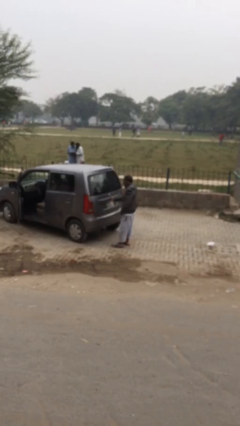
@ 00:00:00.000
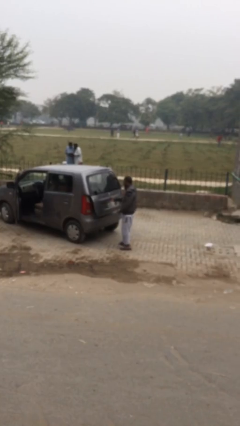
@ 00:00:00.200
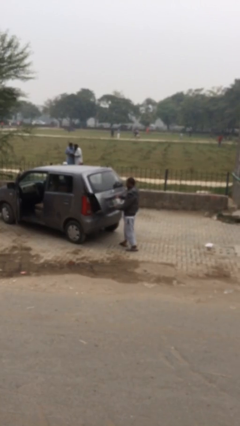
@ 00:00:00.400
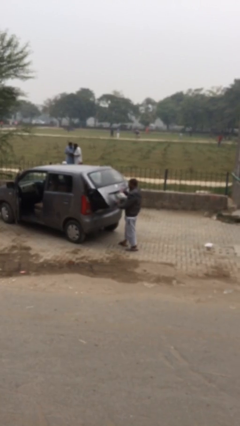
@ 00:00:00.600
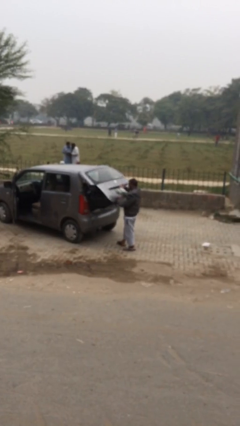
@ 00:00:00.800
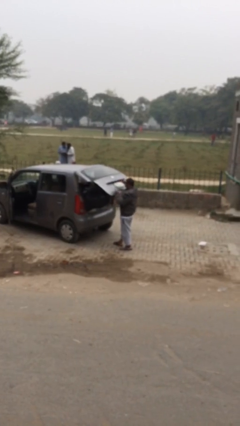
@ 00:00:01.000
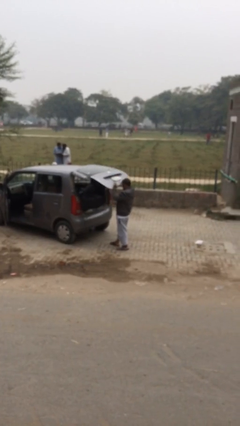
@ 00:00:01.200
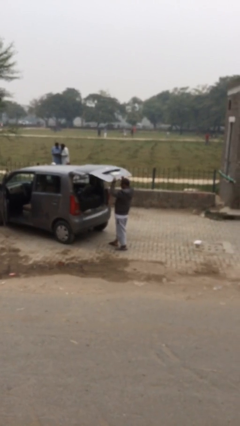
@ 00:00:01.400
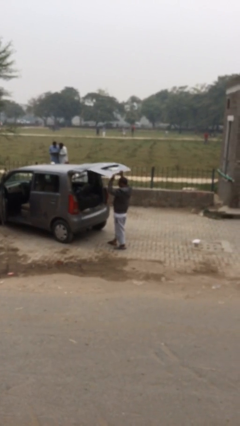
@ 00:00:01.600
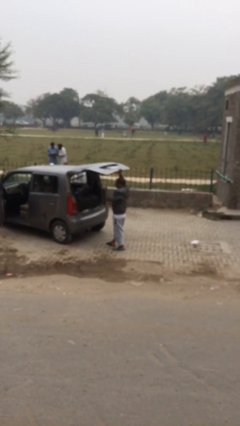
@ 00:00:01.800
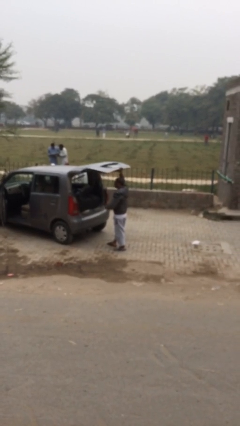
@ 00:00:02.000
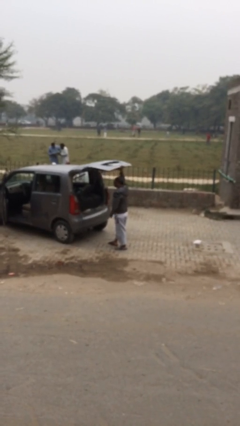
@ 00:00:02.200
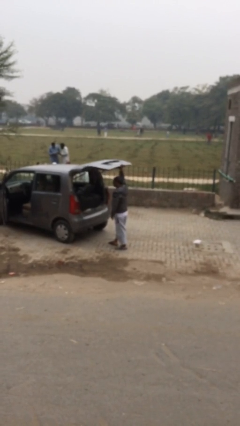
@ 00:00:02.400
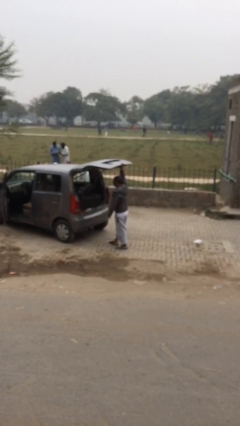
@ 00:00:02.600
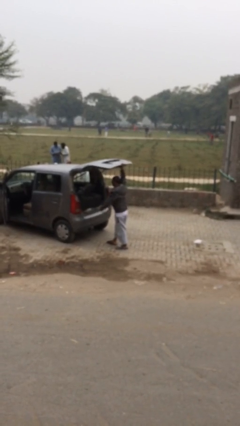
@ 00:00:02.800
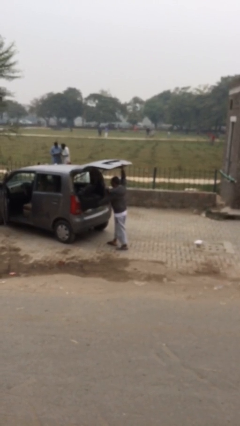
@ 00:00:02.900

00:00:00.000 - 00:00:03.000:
person opens car trunk

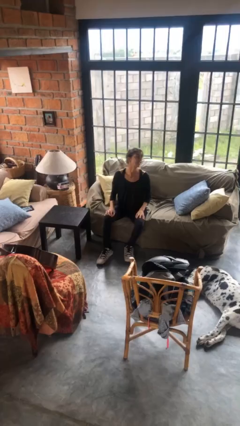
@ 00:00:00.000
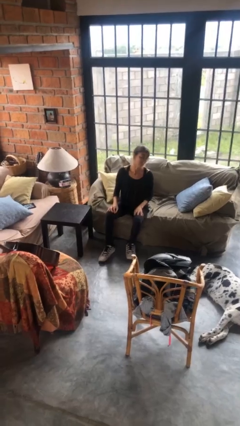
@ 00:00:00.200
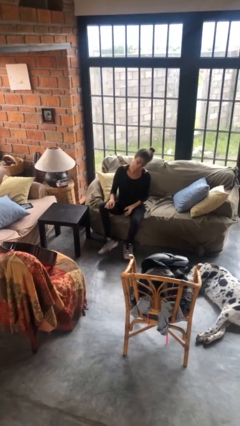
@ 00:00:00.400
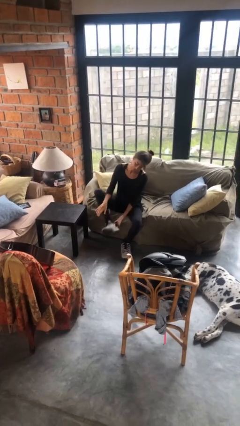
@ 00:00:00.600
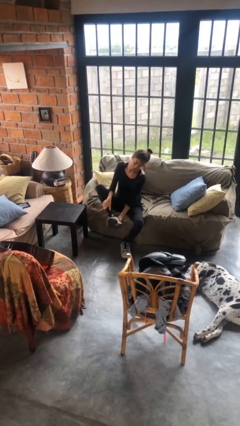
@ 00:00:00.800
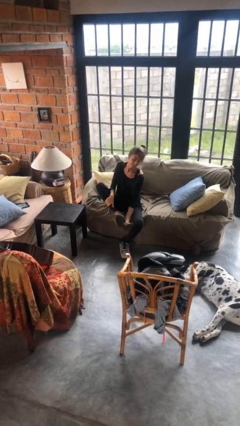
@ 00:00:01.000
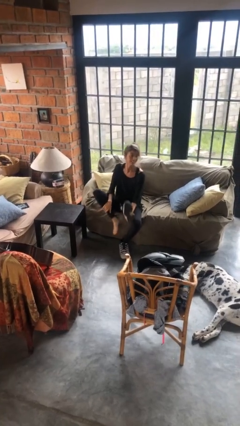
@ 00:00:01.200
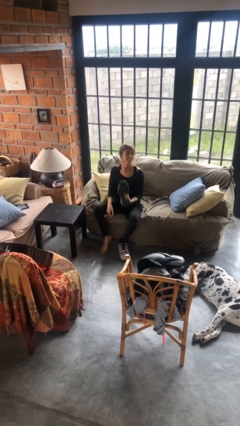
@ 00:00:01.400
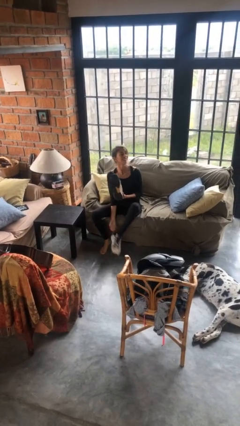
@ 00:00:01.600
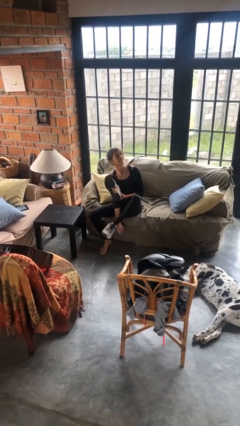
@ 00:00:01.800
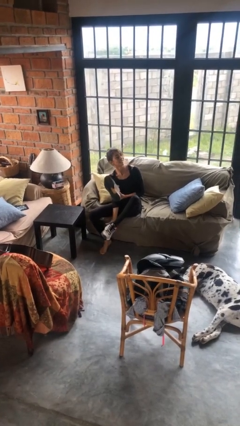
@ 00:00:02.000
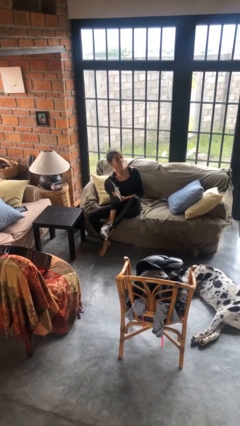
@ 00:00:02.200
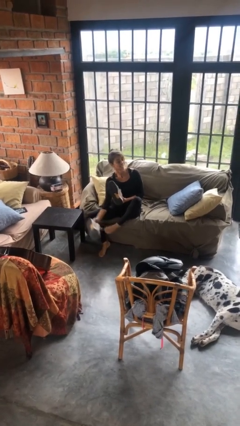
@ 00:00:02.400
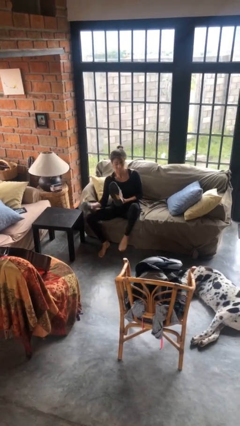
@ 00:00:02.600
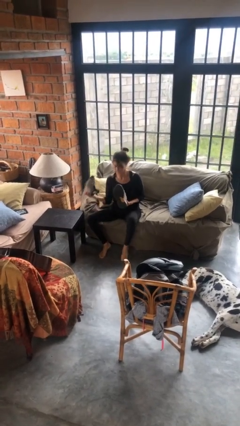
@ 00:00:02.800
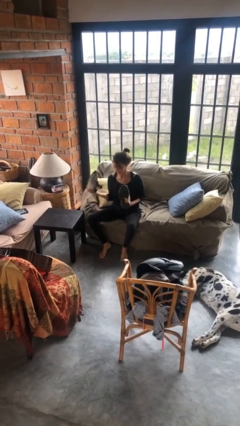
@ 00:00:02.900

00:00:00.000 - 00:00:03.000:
person takes off shoes

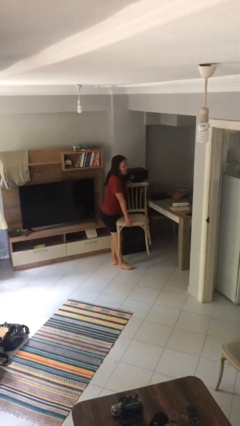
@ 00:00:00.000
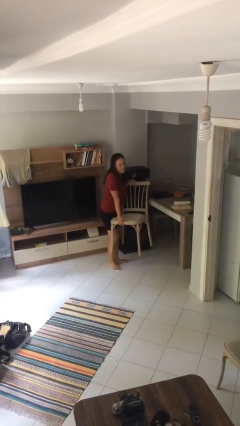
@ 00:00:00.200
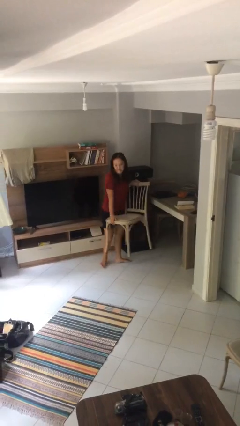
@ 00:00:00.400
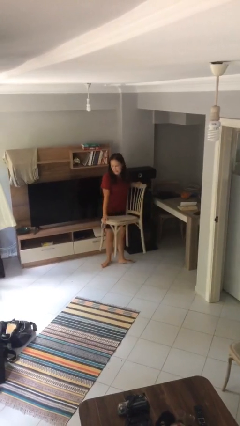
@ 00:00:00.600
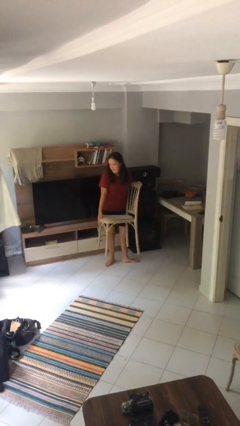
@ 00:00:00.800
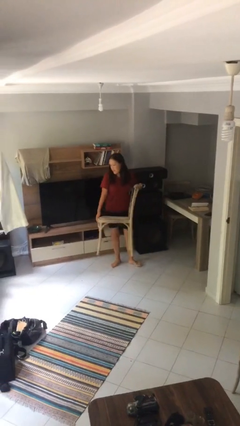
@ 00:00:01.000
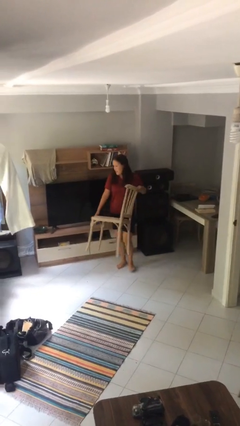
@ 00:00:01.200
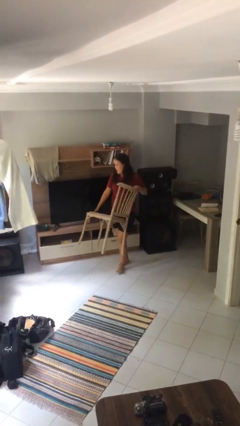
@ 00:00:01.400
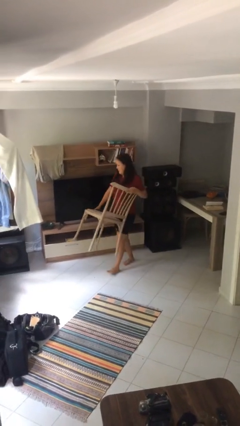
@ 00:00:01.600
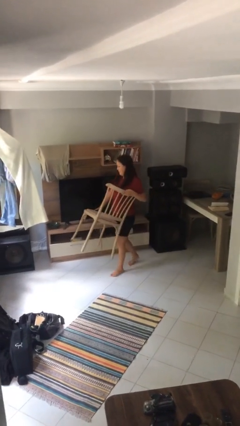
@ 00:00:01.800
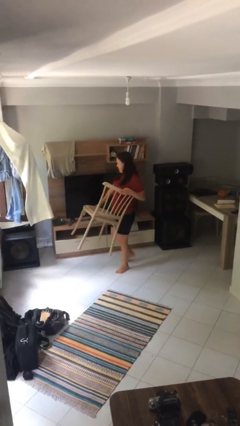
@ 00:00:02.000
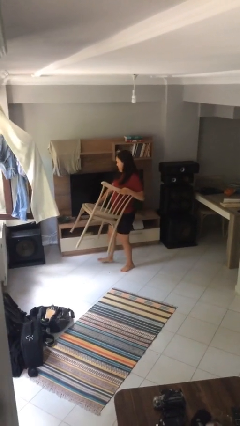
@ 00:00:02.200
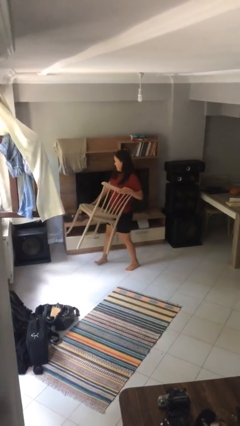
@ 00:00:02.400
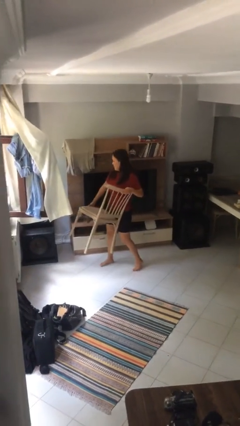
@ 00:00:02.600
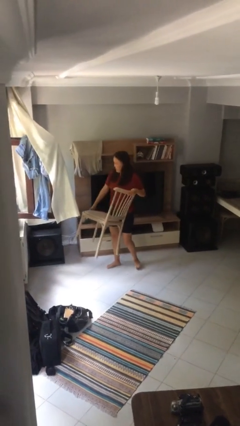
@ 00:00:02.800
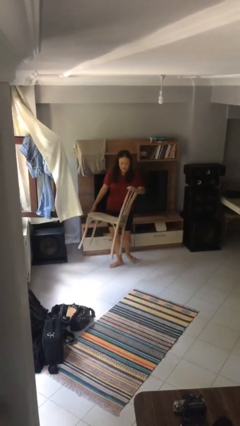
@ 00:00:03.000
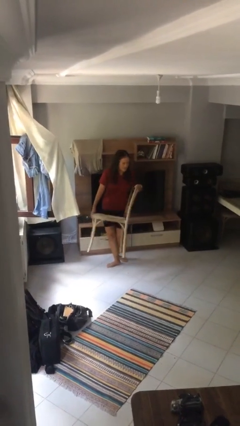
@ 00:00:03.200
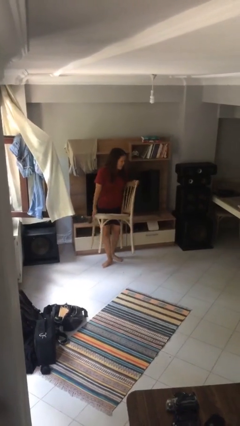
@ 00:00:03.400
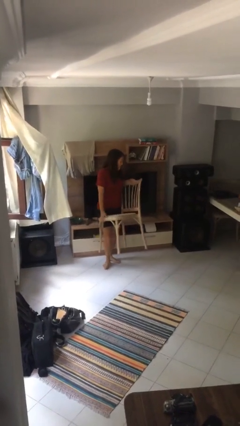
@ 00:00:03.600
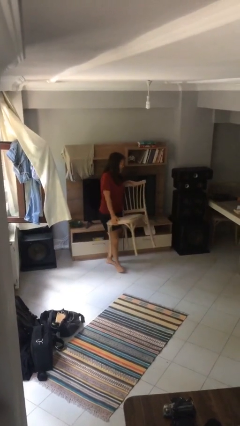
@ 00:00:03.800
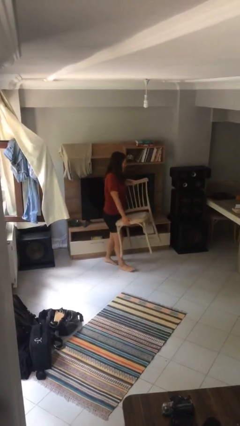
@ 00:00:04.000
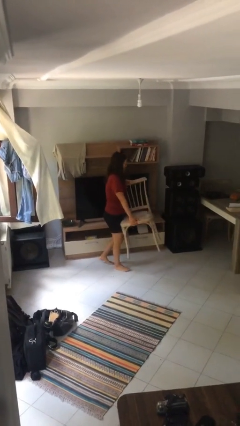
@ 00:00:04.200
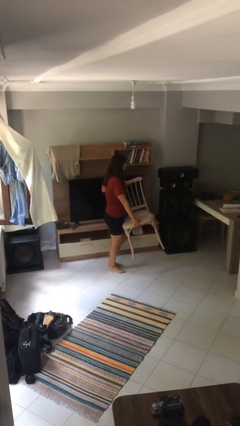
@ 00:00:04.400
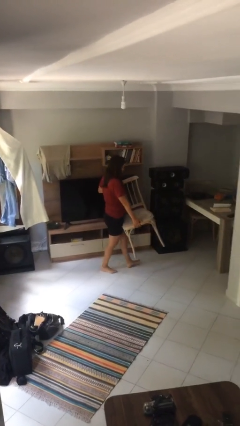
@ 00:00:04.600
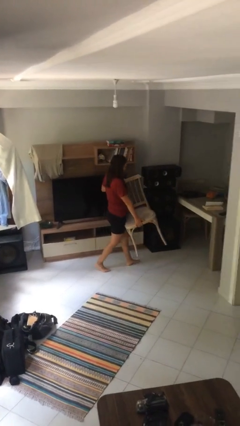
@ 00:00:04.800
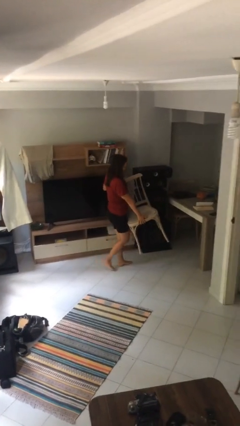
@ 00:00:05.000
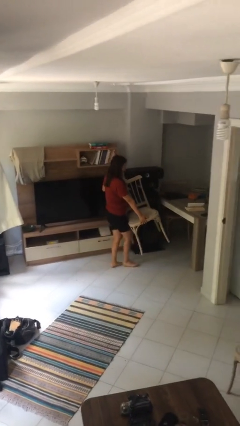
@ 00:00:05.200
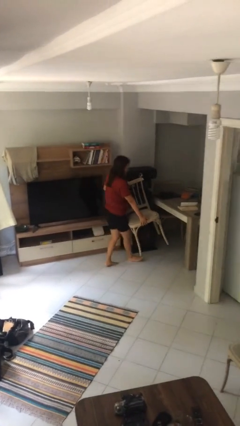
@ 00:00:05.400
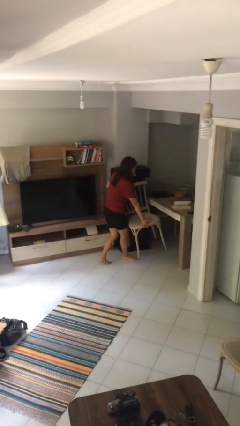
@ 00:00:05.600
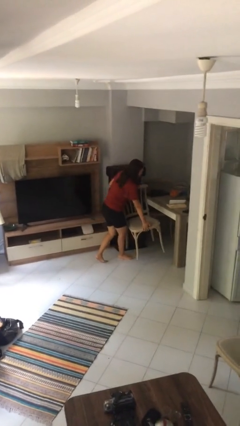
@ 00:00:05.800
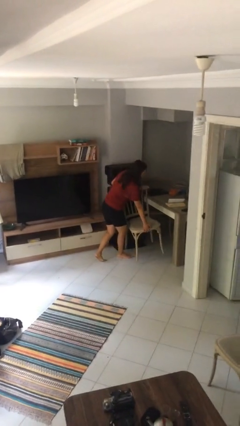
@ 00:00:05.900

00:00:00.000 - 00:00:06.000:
person carries heavy object

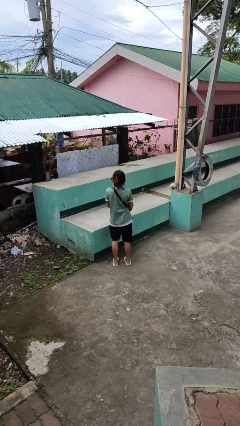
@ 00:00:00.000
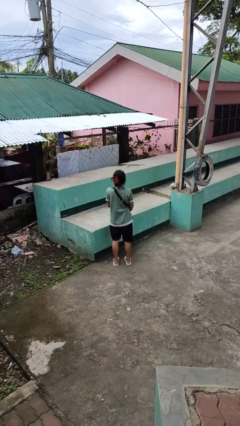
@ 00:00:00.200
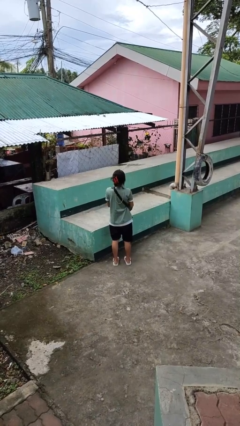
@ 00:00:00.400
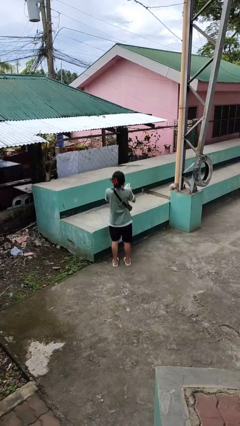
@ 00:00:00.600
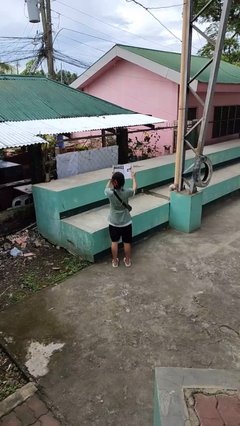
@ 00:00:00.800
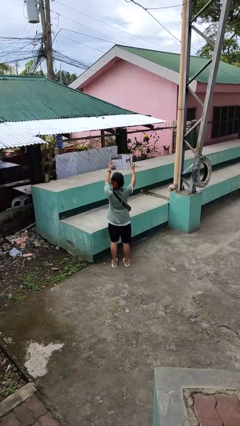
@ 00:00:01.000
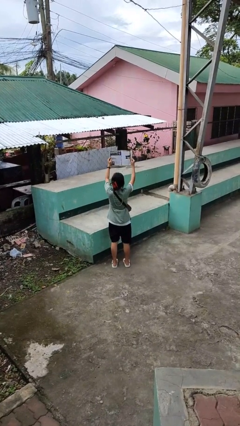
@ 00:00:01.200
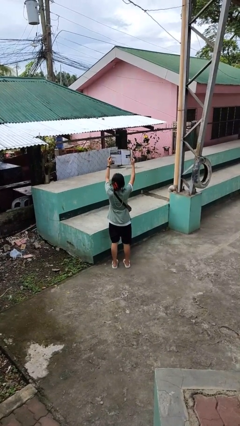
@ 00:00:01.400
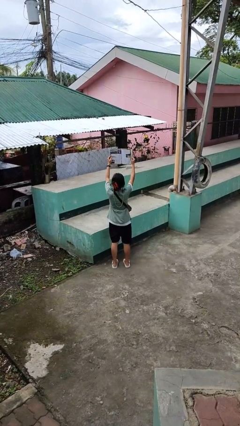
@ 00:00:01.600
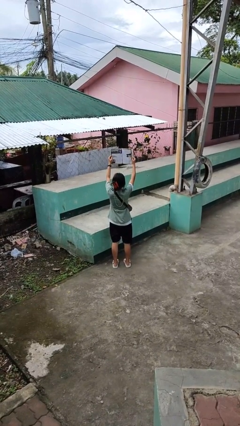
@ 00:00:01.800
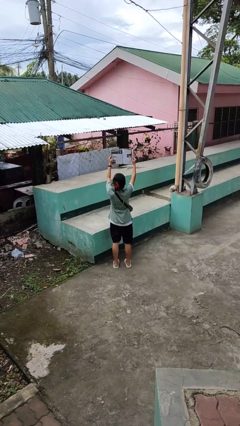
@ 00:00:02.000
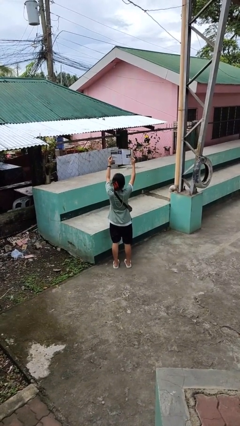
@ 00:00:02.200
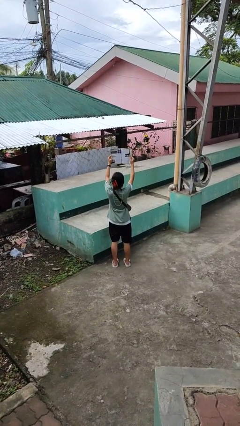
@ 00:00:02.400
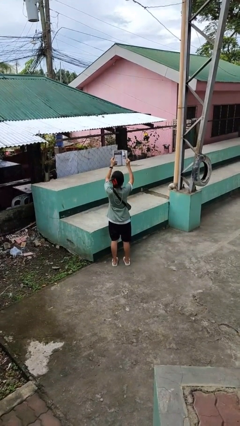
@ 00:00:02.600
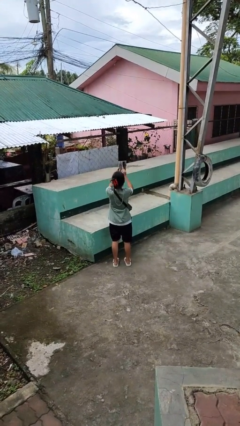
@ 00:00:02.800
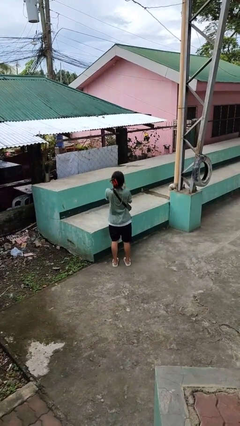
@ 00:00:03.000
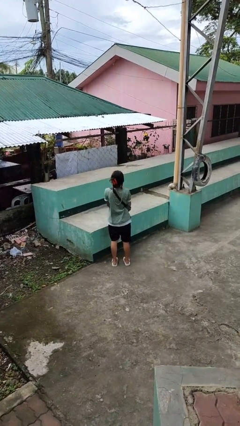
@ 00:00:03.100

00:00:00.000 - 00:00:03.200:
person reads magazine

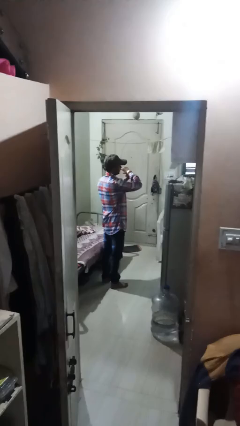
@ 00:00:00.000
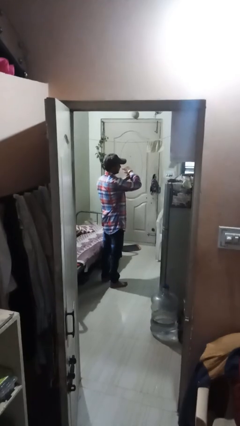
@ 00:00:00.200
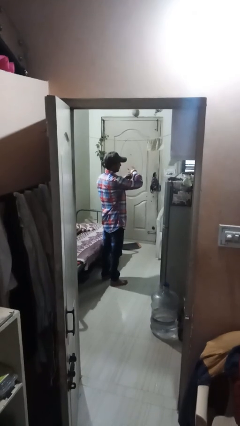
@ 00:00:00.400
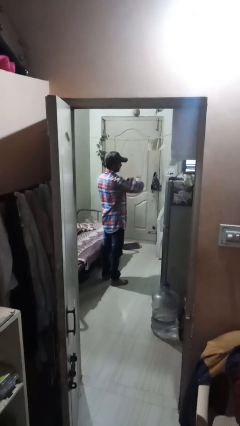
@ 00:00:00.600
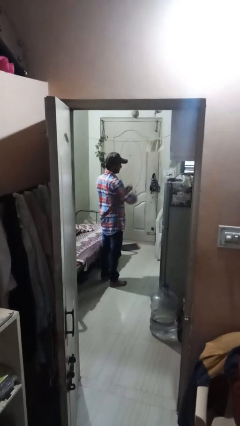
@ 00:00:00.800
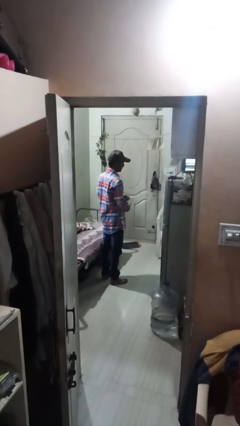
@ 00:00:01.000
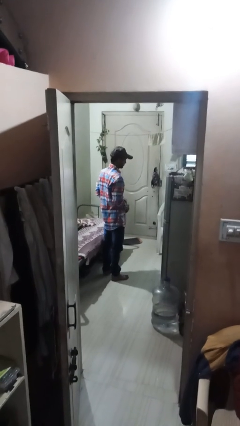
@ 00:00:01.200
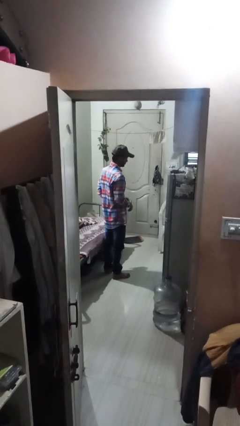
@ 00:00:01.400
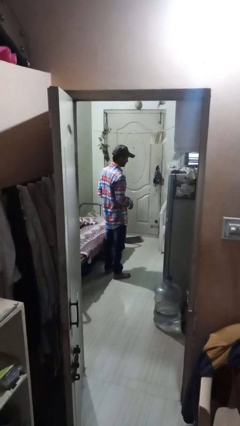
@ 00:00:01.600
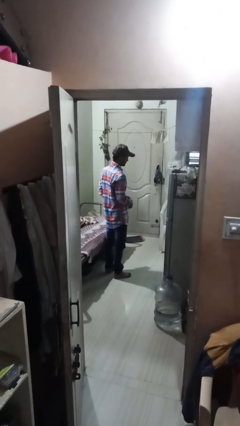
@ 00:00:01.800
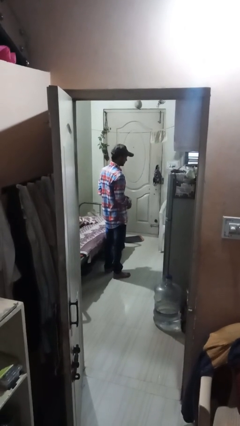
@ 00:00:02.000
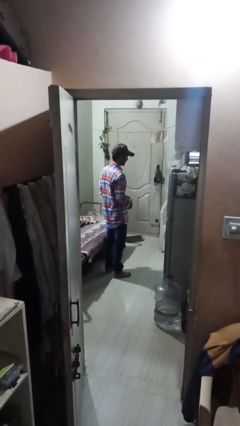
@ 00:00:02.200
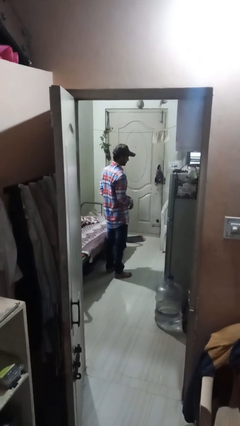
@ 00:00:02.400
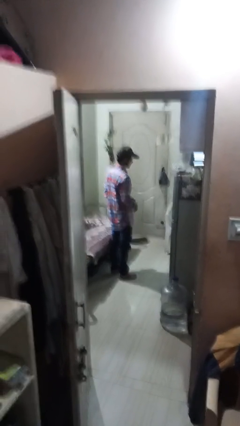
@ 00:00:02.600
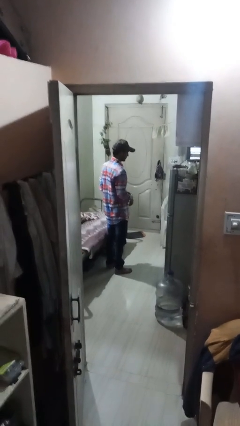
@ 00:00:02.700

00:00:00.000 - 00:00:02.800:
person takes off wristwatch
